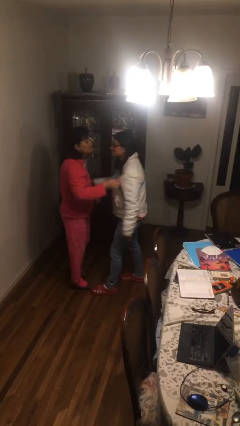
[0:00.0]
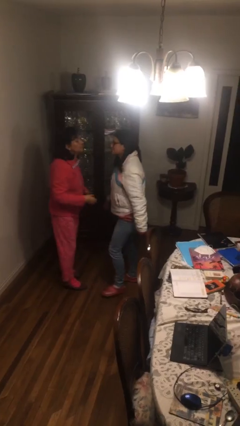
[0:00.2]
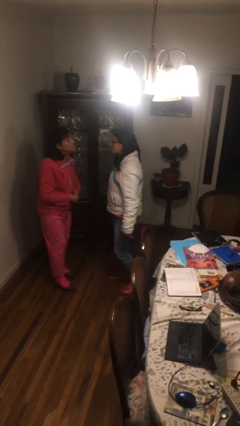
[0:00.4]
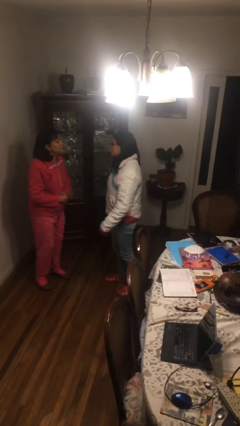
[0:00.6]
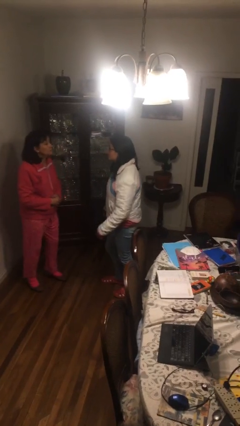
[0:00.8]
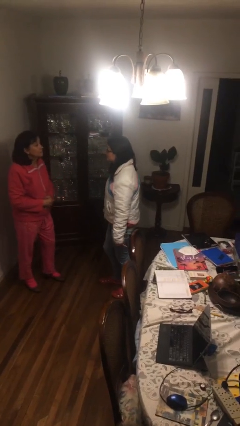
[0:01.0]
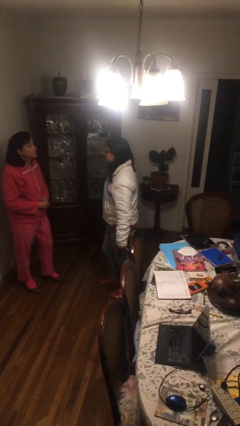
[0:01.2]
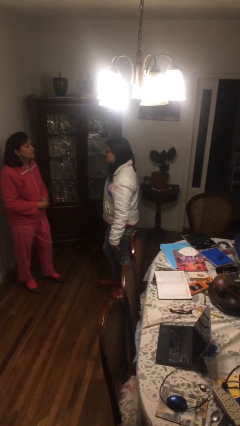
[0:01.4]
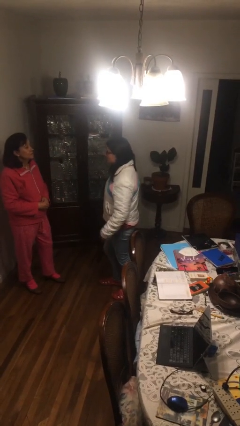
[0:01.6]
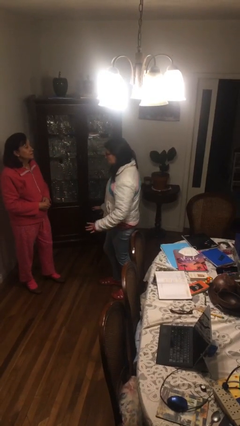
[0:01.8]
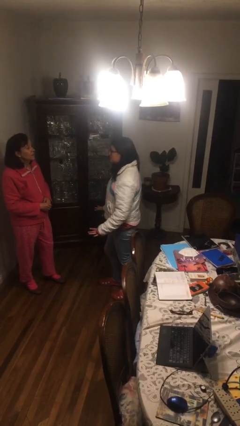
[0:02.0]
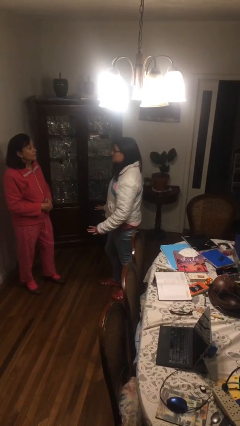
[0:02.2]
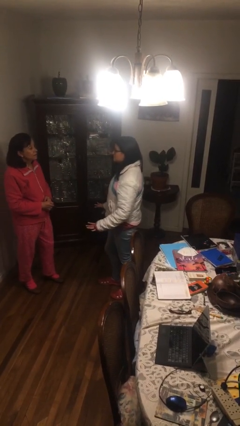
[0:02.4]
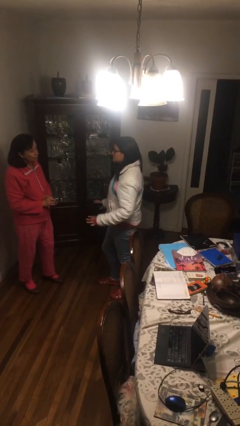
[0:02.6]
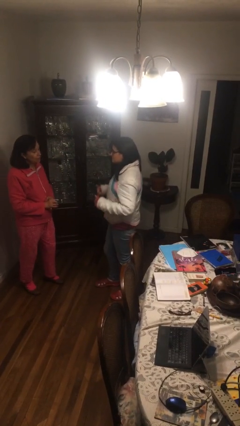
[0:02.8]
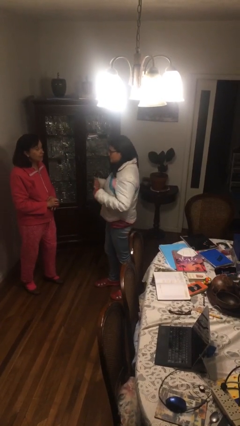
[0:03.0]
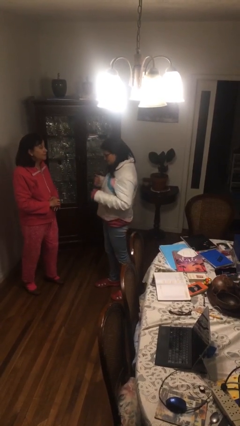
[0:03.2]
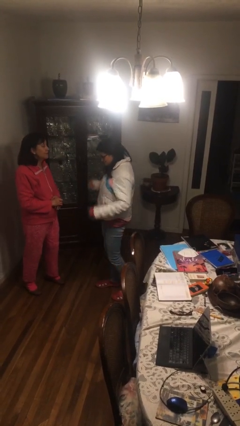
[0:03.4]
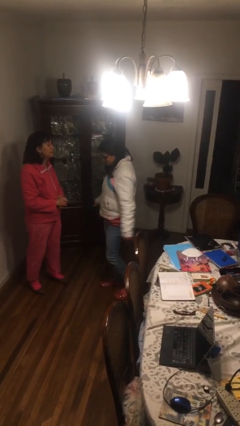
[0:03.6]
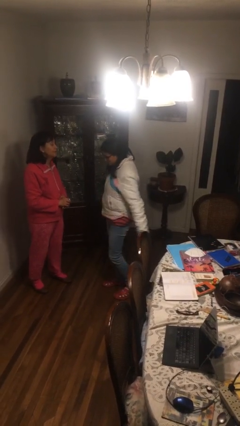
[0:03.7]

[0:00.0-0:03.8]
person talks to person

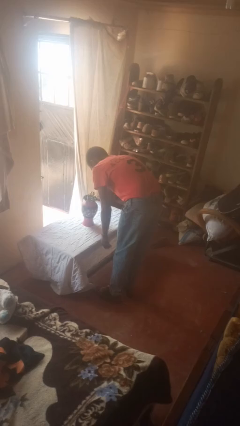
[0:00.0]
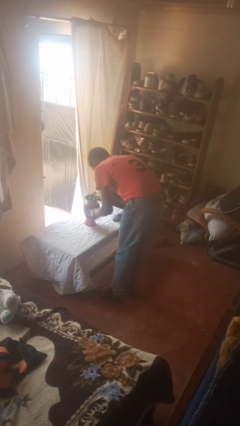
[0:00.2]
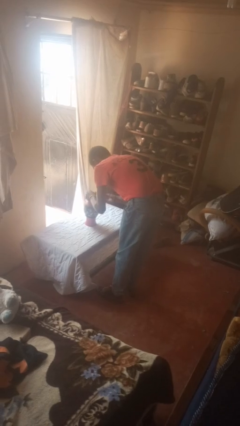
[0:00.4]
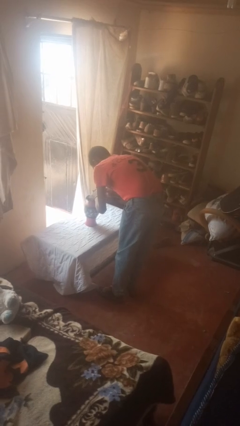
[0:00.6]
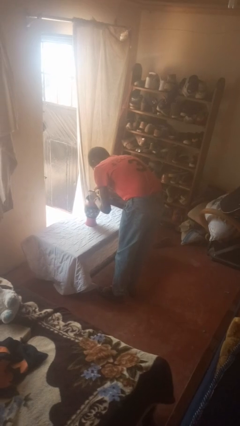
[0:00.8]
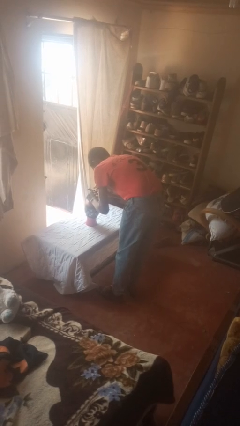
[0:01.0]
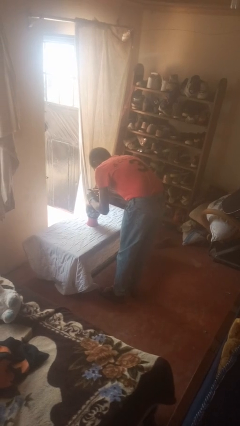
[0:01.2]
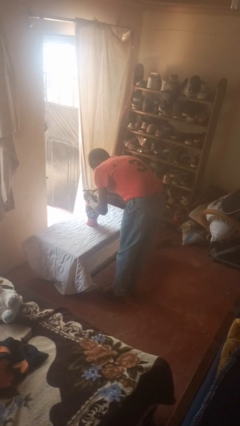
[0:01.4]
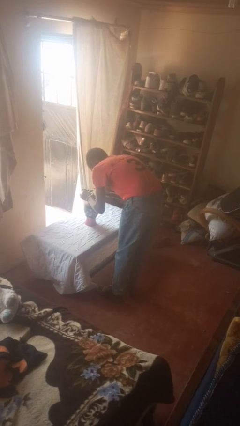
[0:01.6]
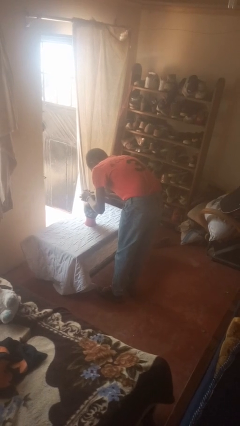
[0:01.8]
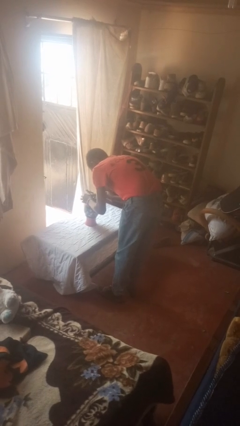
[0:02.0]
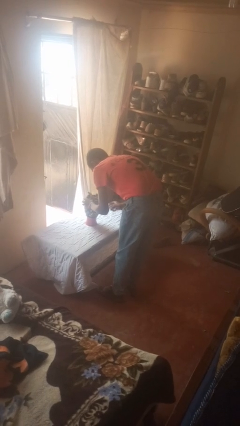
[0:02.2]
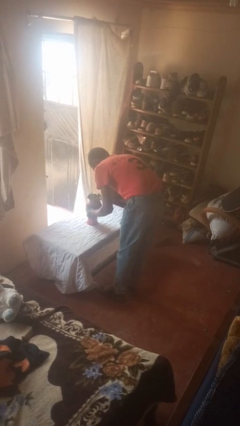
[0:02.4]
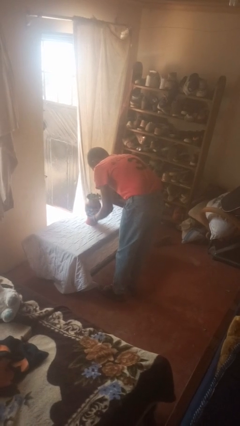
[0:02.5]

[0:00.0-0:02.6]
person arranges flowers in vase

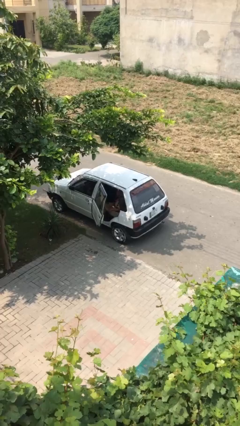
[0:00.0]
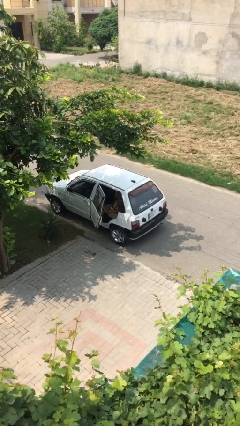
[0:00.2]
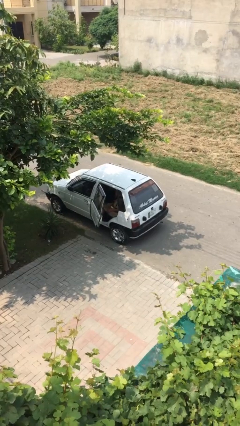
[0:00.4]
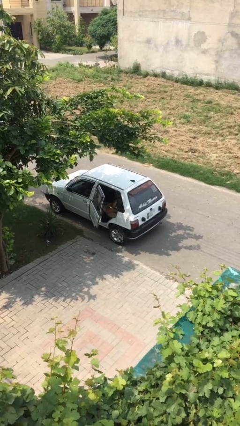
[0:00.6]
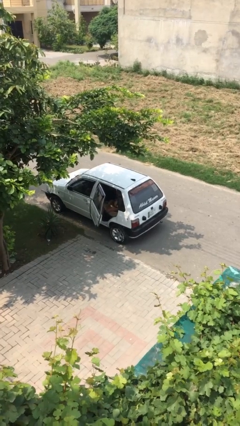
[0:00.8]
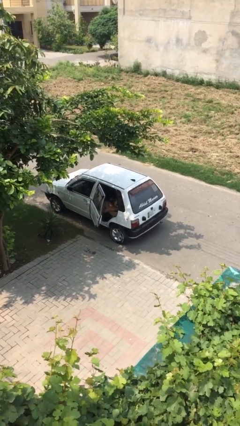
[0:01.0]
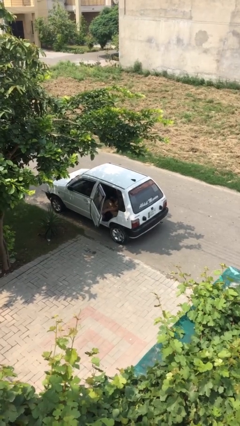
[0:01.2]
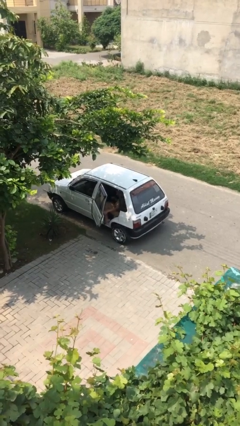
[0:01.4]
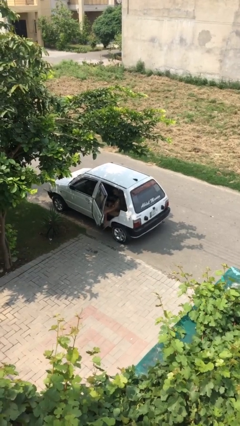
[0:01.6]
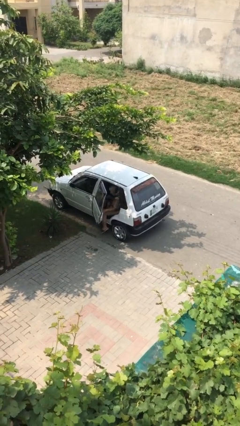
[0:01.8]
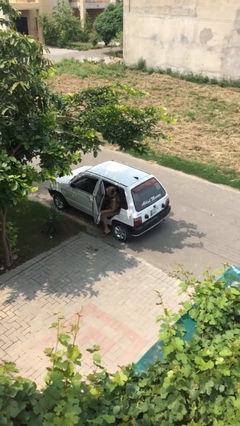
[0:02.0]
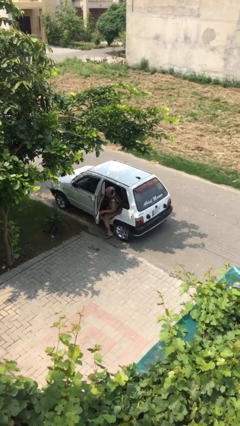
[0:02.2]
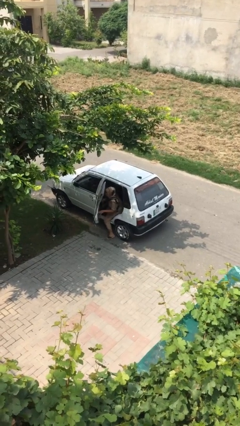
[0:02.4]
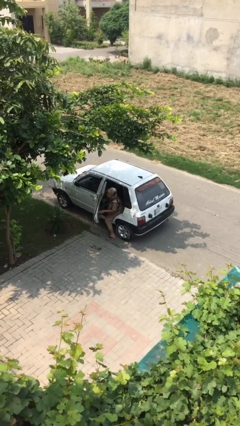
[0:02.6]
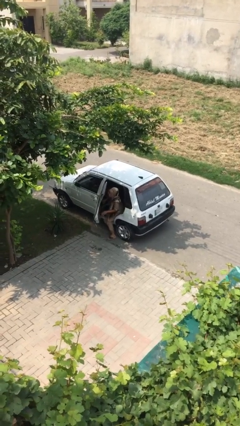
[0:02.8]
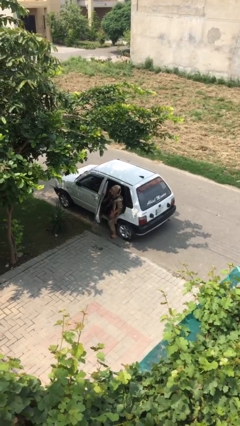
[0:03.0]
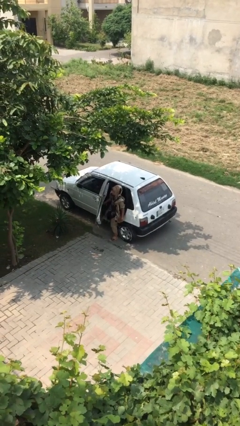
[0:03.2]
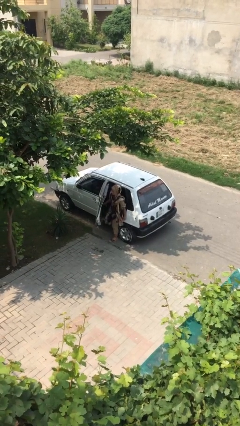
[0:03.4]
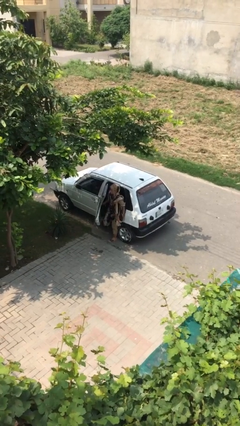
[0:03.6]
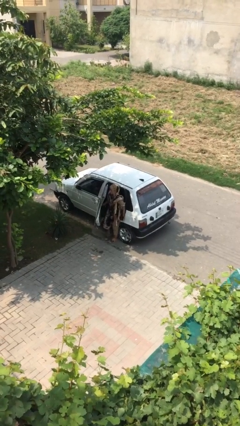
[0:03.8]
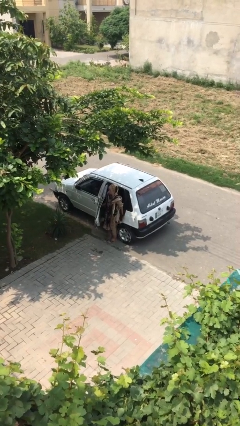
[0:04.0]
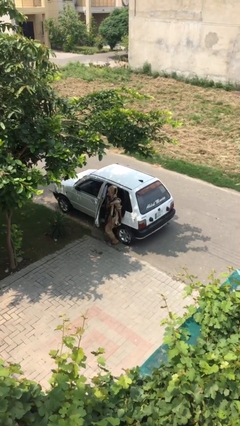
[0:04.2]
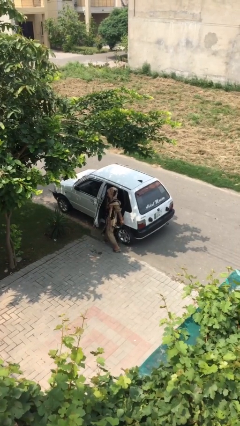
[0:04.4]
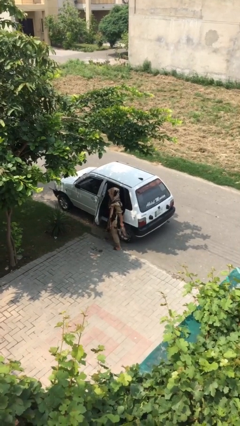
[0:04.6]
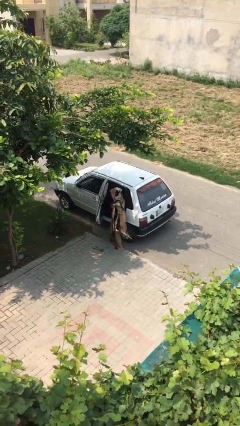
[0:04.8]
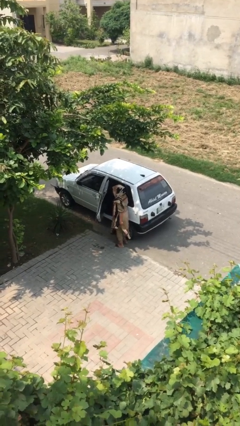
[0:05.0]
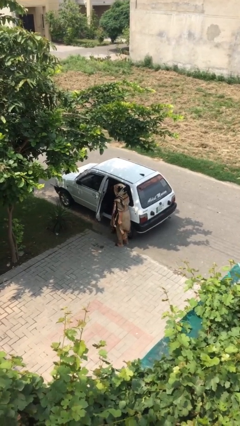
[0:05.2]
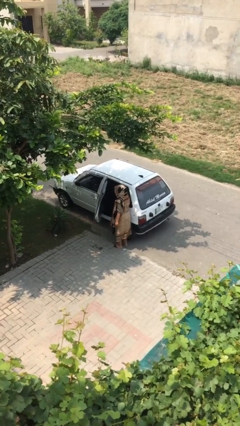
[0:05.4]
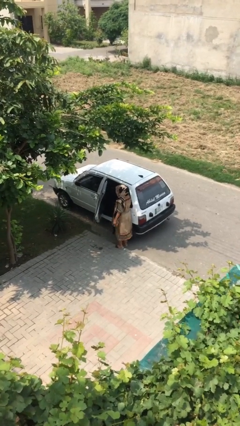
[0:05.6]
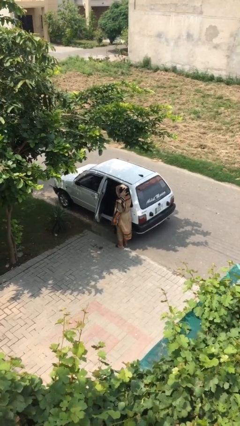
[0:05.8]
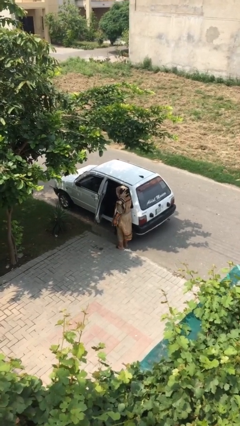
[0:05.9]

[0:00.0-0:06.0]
person exits car

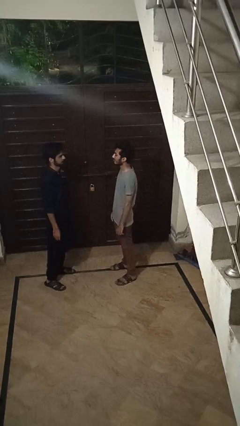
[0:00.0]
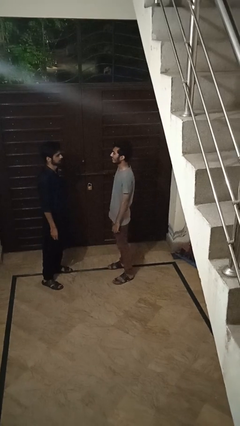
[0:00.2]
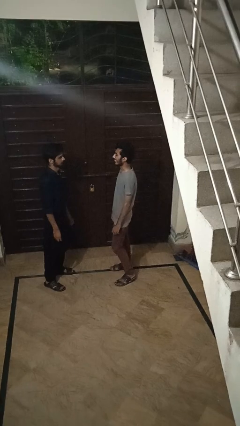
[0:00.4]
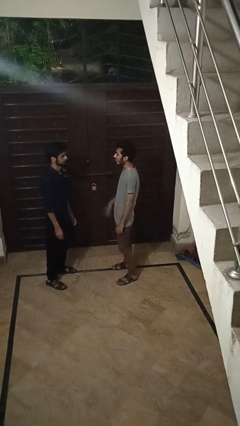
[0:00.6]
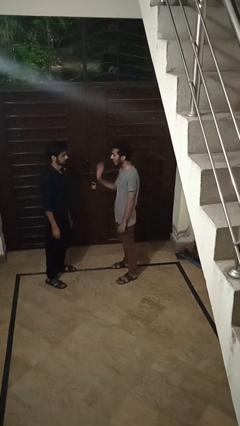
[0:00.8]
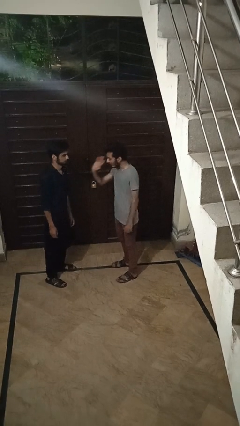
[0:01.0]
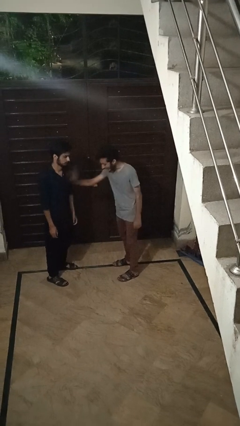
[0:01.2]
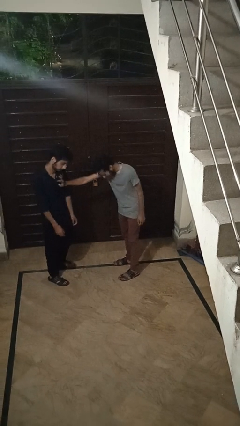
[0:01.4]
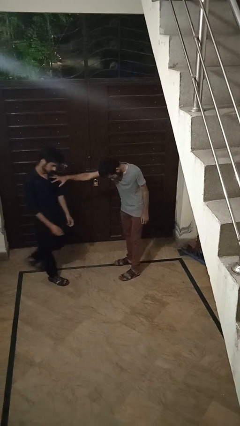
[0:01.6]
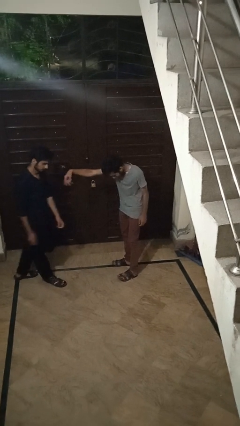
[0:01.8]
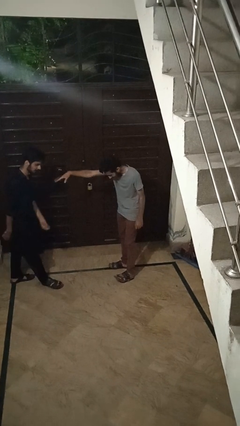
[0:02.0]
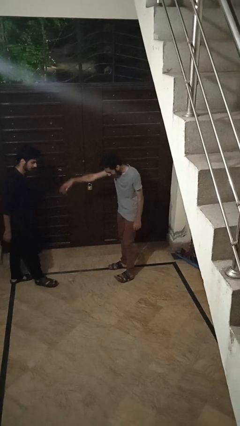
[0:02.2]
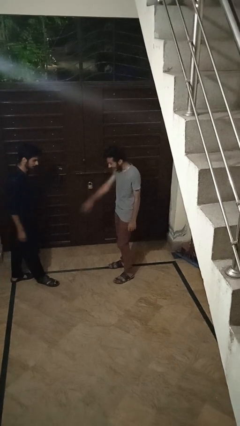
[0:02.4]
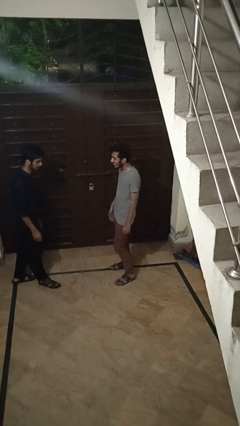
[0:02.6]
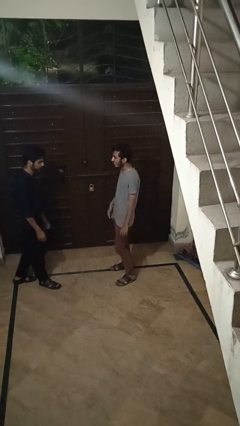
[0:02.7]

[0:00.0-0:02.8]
person shoves person

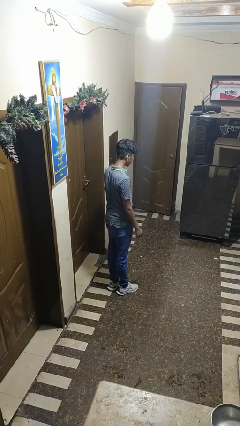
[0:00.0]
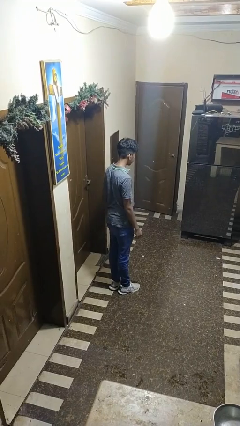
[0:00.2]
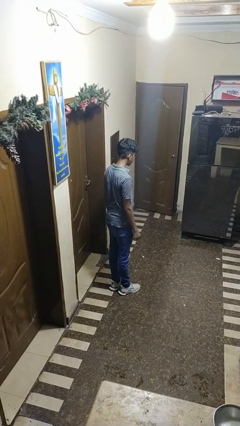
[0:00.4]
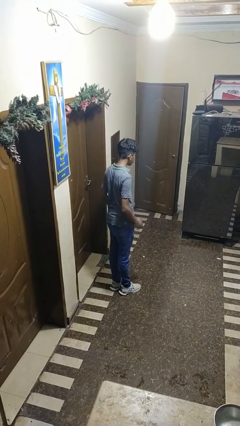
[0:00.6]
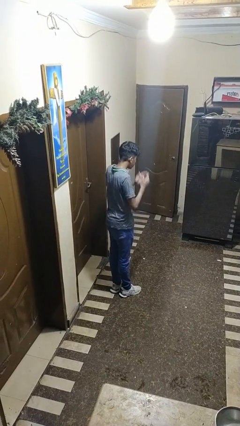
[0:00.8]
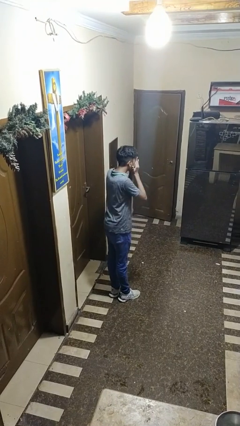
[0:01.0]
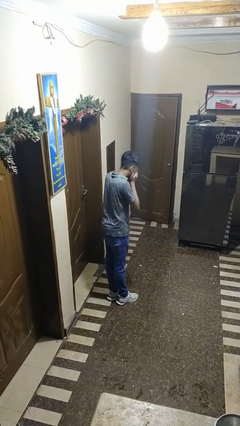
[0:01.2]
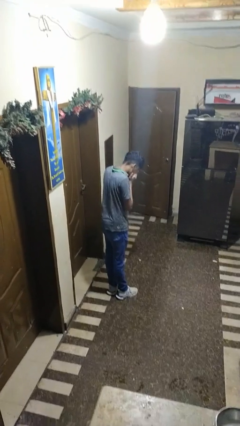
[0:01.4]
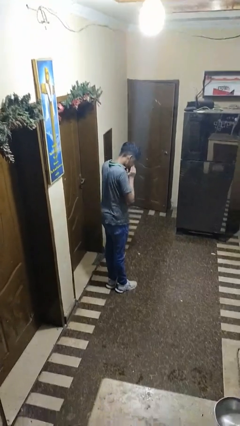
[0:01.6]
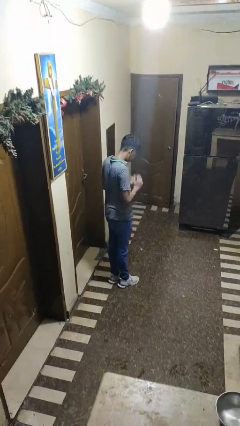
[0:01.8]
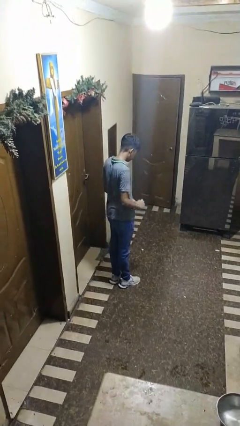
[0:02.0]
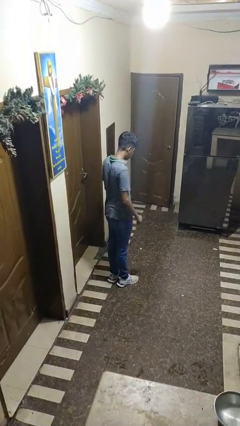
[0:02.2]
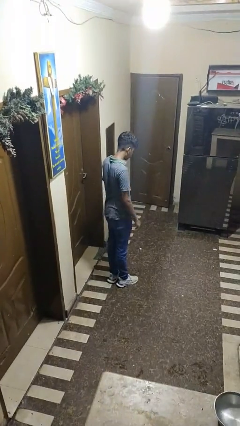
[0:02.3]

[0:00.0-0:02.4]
person sneezes into hand
